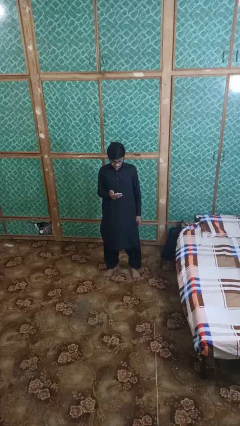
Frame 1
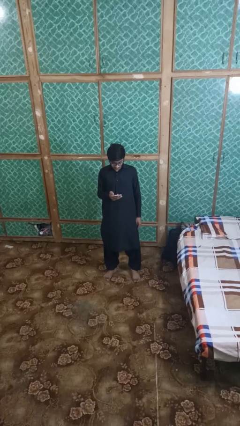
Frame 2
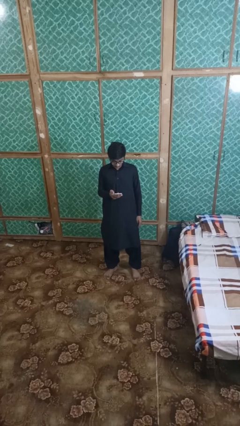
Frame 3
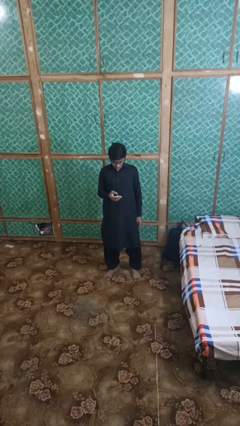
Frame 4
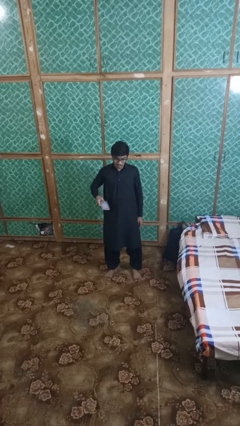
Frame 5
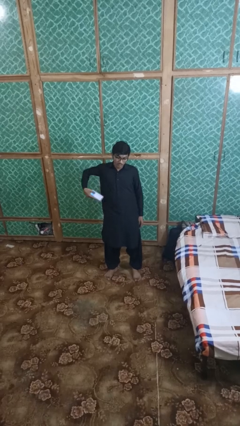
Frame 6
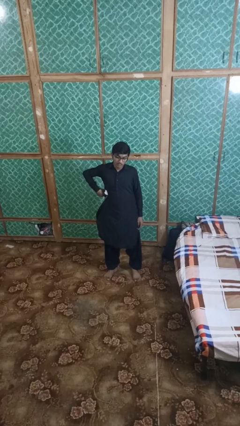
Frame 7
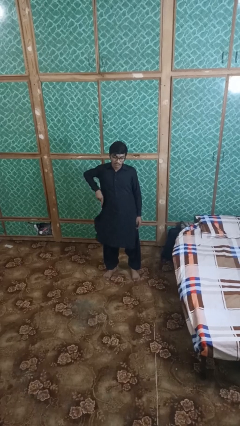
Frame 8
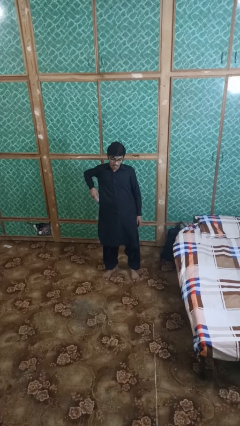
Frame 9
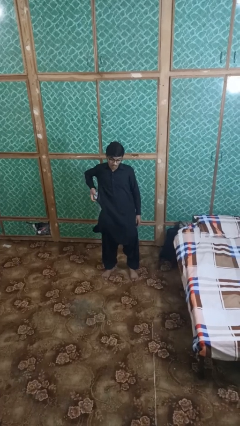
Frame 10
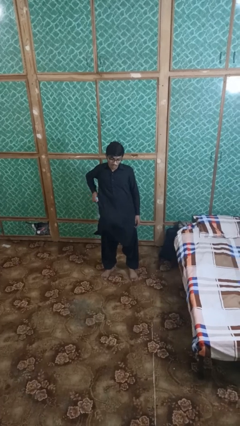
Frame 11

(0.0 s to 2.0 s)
person puts phone into pocket

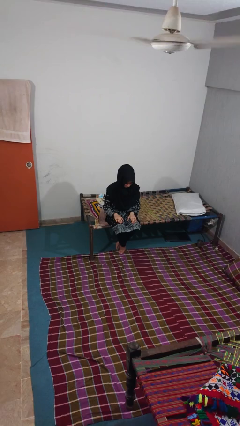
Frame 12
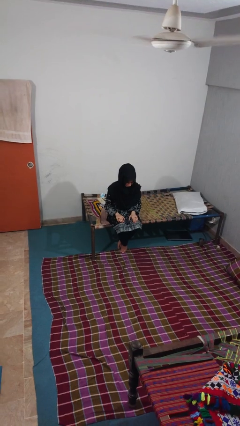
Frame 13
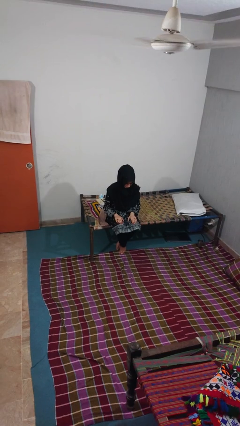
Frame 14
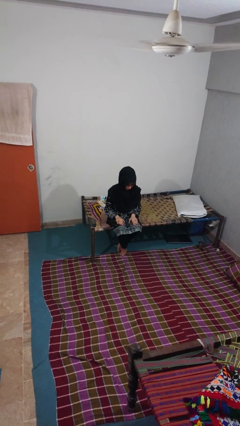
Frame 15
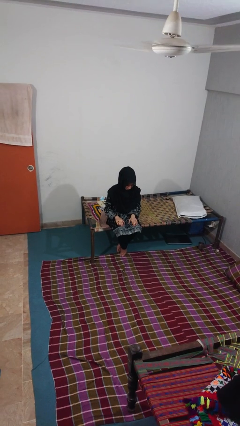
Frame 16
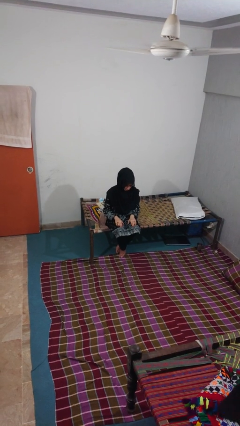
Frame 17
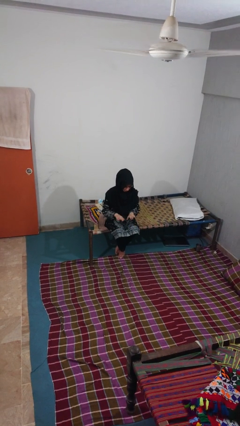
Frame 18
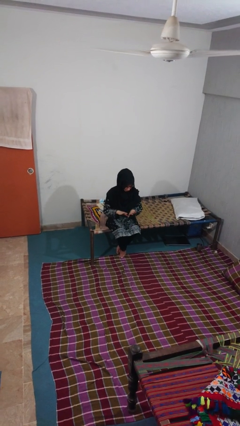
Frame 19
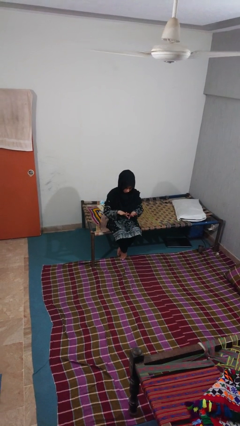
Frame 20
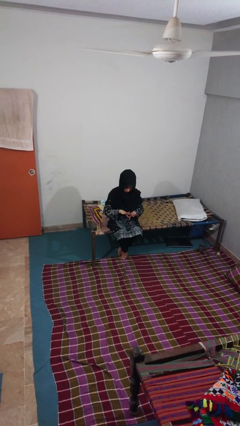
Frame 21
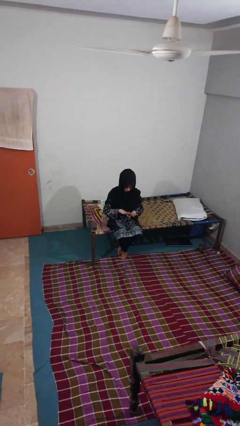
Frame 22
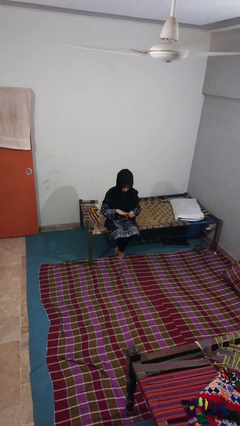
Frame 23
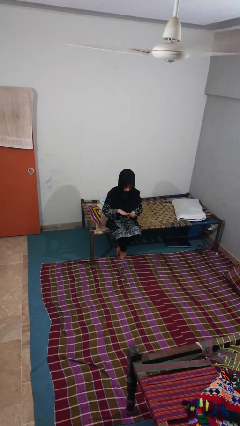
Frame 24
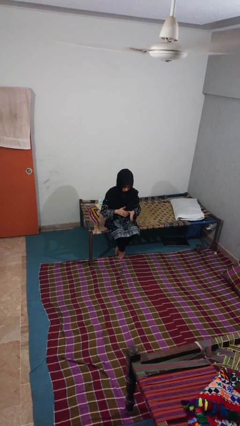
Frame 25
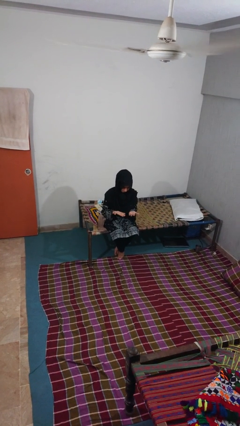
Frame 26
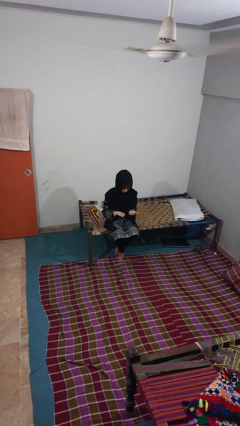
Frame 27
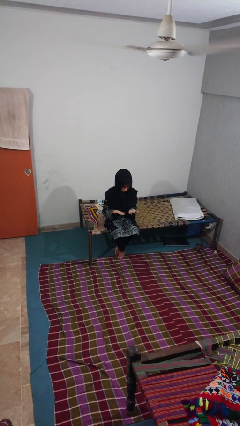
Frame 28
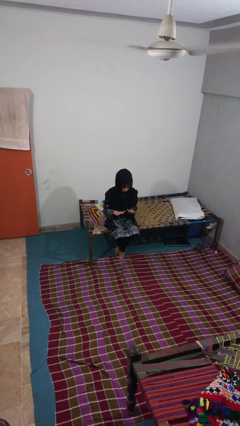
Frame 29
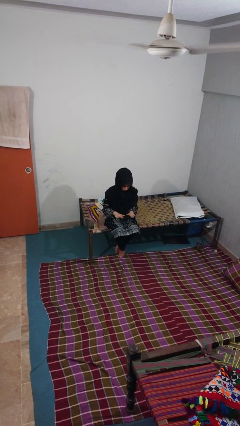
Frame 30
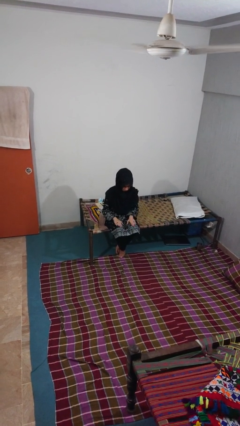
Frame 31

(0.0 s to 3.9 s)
person looks at hands in lap

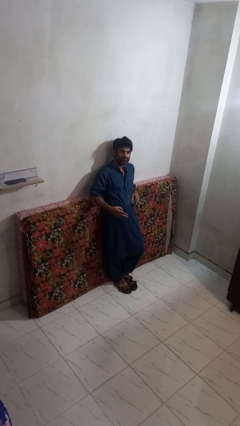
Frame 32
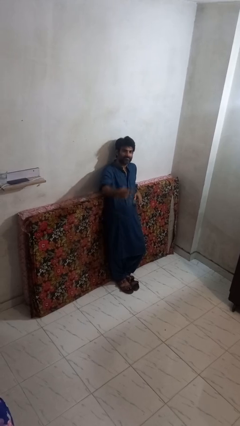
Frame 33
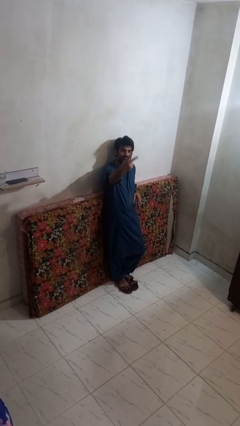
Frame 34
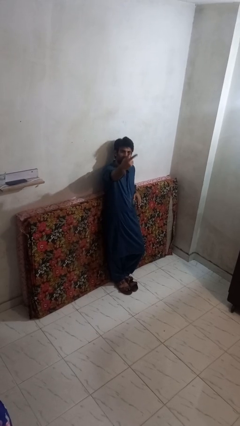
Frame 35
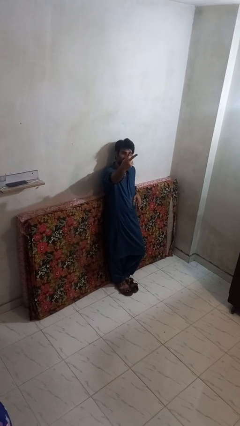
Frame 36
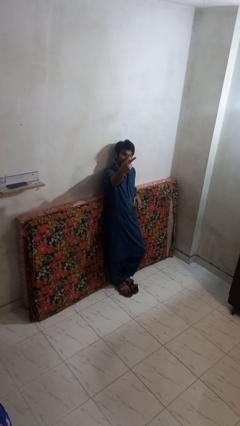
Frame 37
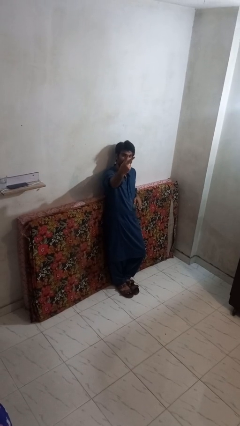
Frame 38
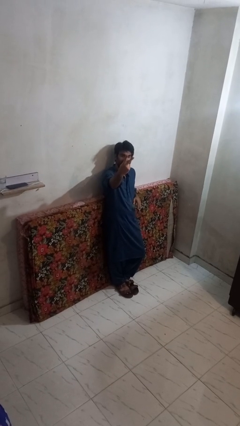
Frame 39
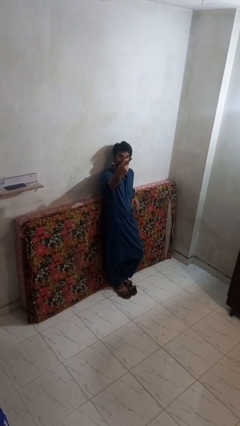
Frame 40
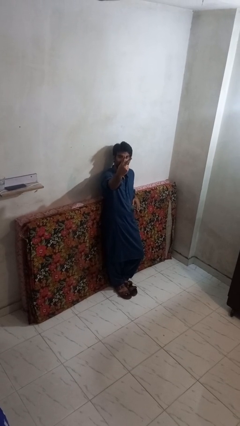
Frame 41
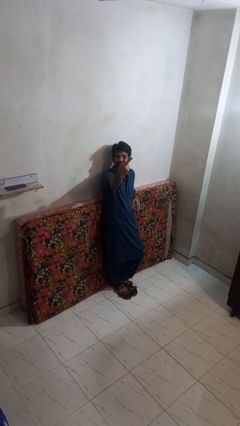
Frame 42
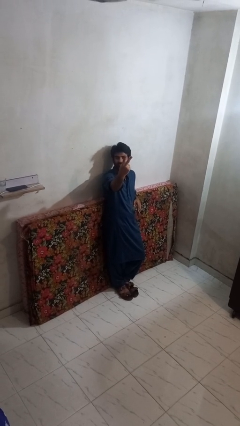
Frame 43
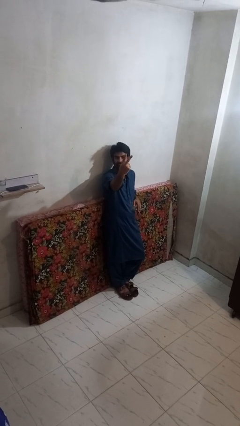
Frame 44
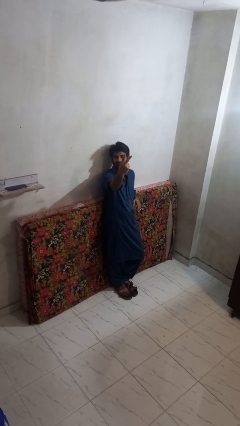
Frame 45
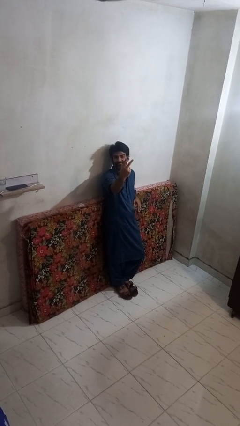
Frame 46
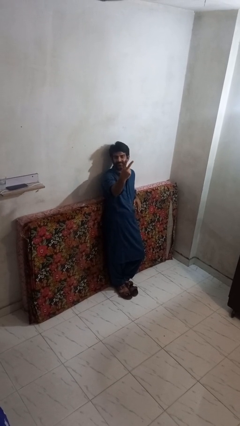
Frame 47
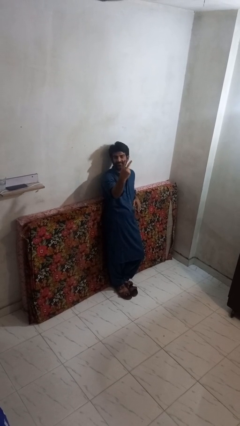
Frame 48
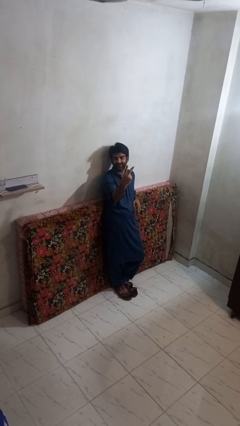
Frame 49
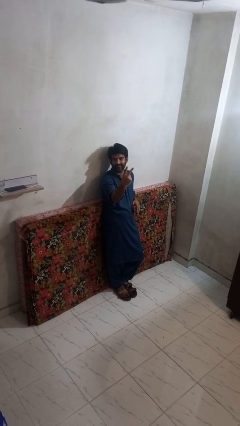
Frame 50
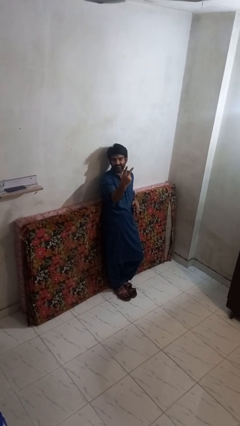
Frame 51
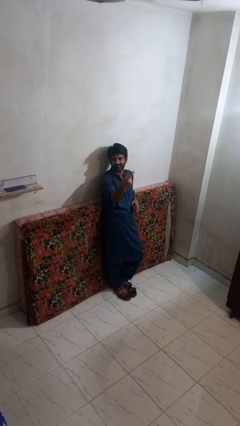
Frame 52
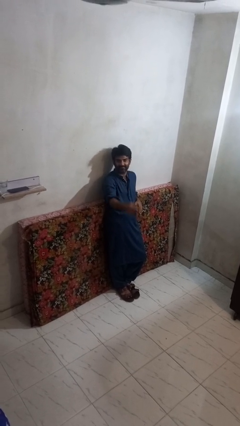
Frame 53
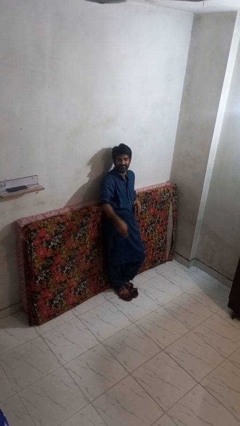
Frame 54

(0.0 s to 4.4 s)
person gestures peace

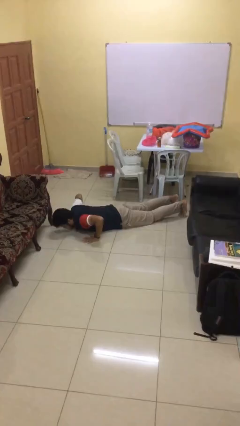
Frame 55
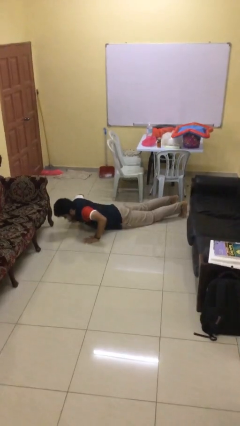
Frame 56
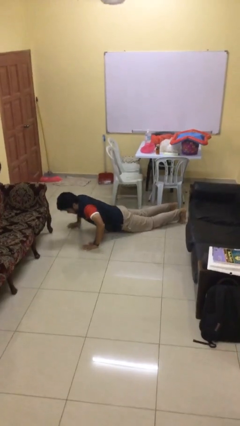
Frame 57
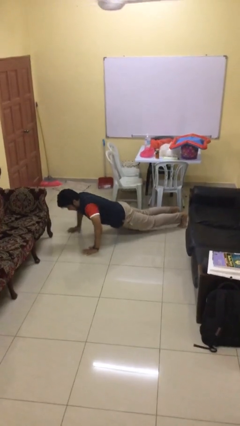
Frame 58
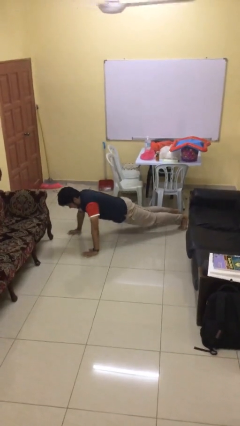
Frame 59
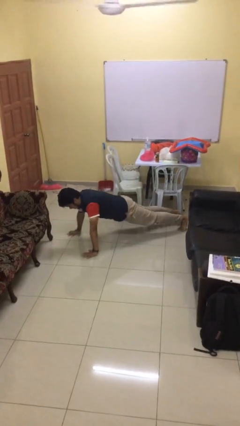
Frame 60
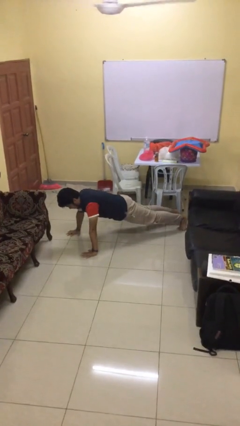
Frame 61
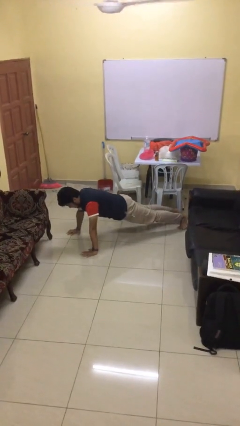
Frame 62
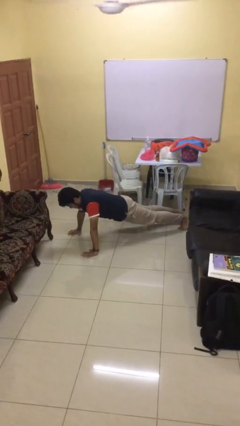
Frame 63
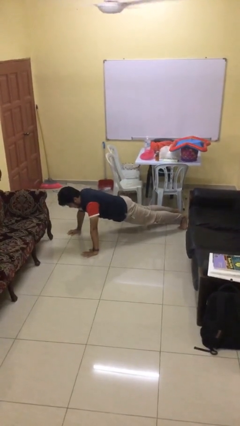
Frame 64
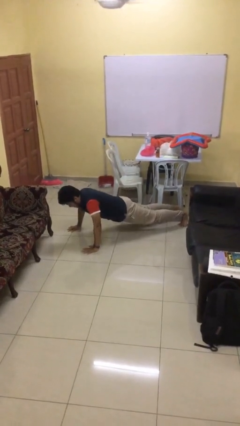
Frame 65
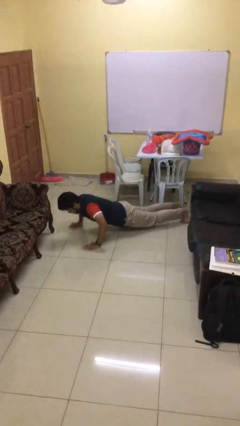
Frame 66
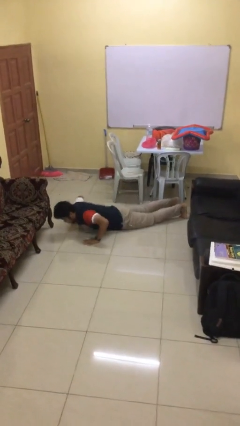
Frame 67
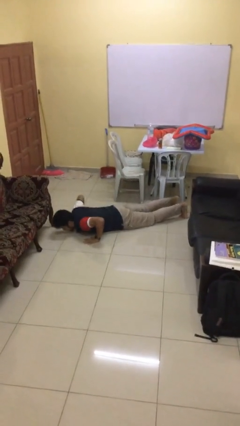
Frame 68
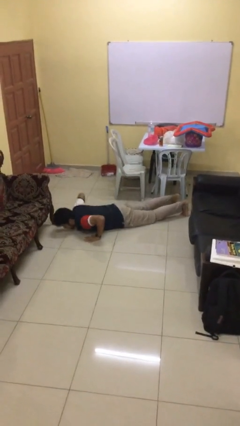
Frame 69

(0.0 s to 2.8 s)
person exercises with pushup

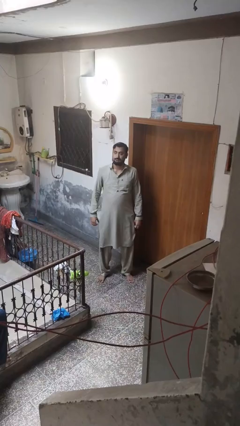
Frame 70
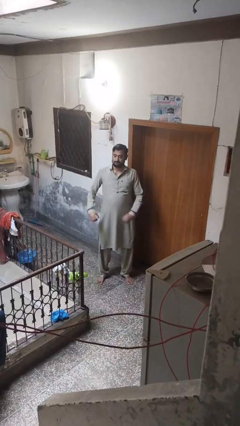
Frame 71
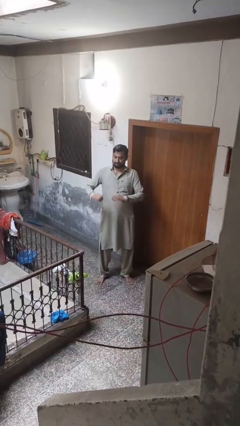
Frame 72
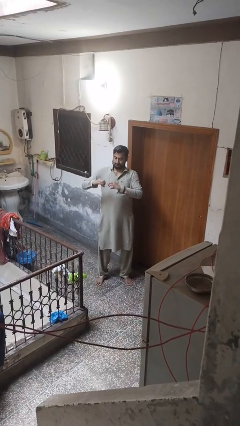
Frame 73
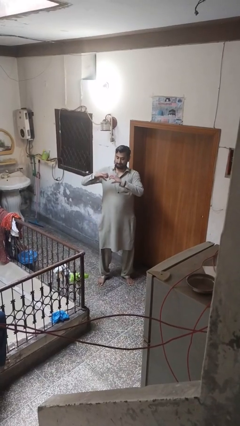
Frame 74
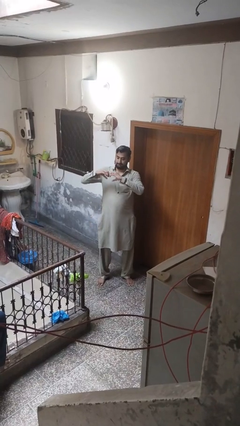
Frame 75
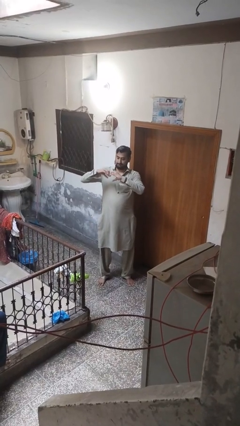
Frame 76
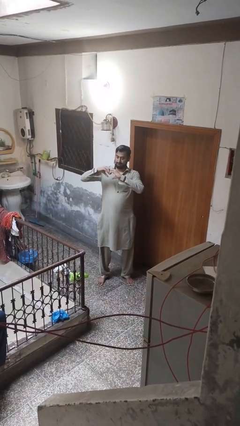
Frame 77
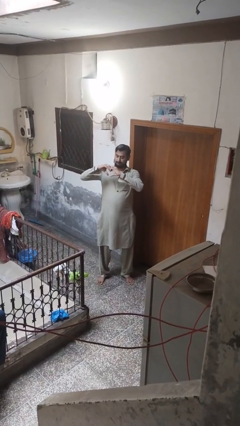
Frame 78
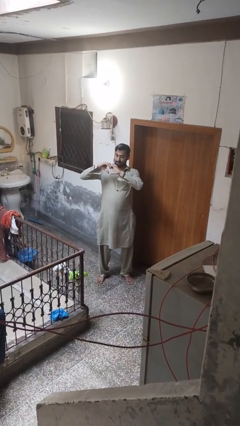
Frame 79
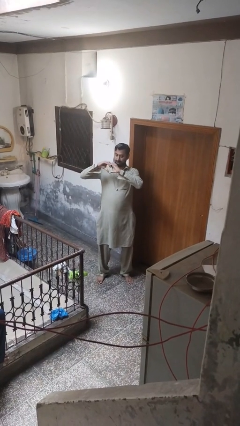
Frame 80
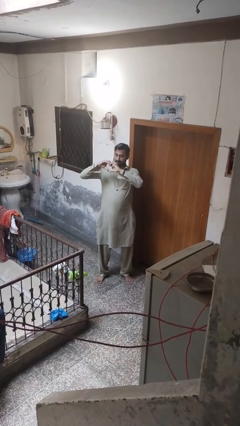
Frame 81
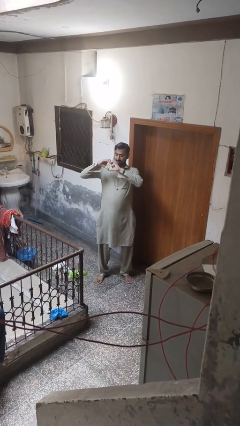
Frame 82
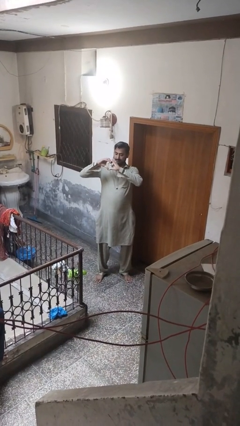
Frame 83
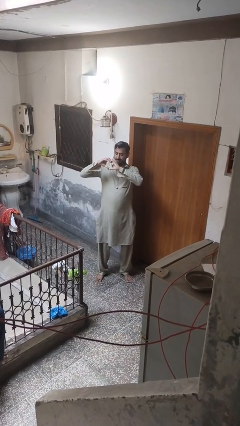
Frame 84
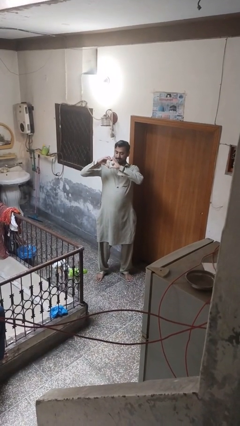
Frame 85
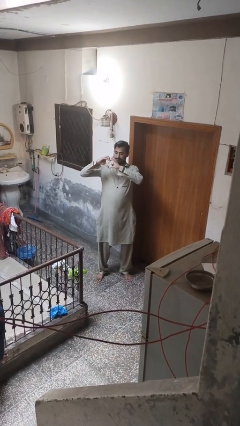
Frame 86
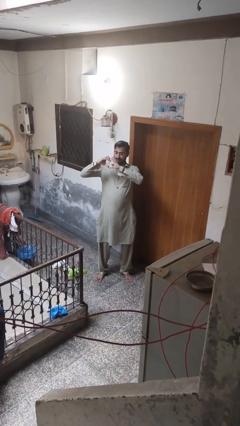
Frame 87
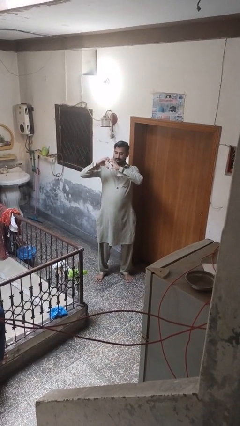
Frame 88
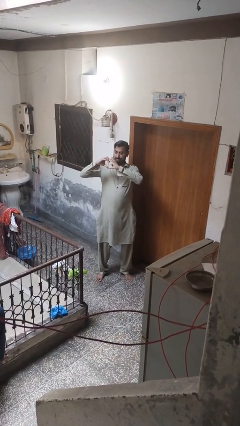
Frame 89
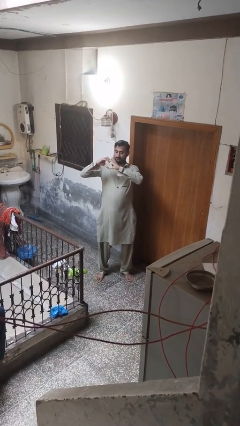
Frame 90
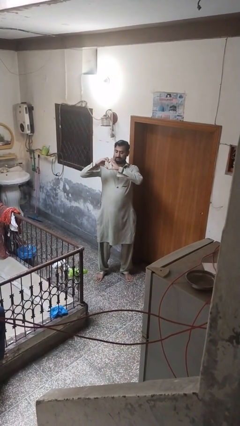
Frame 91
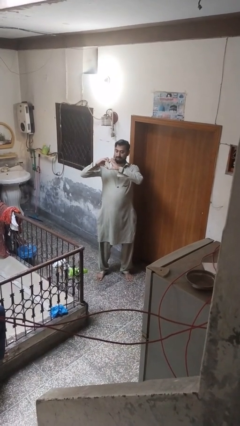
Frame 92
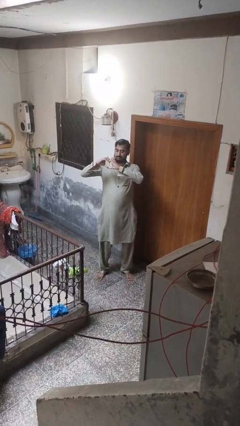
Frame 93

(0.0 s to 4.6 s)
person gestures heart

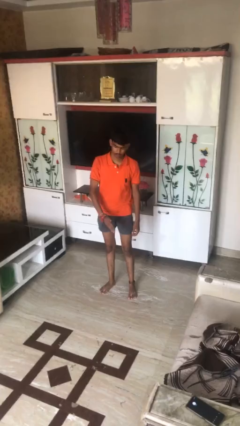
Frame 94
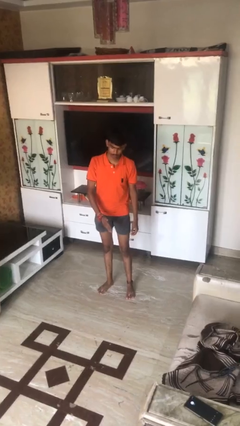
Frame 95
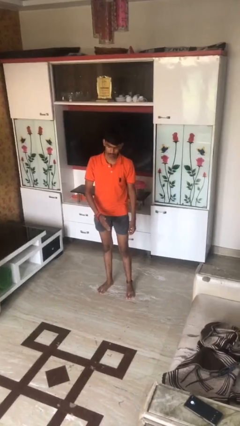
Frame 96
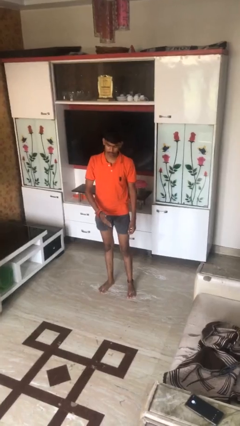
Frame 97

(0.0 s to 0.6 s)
person karate chop
